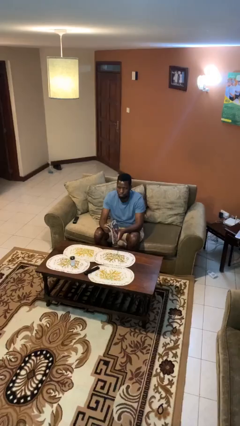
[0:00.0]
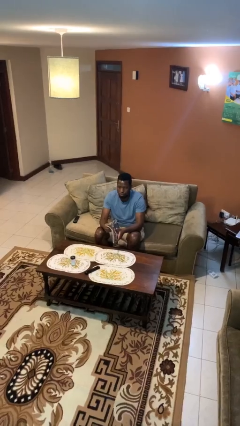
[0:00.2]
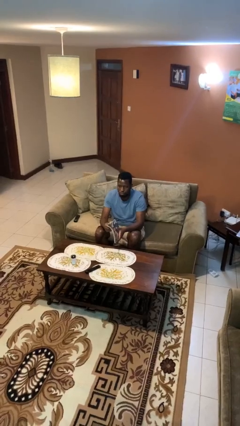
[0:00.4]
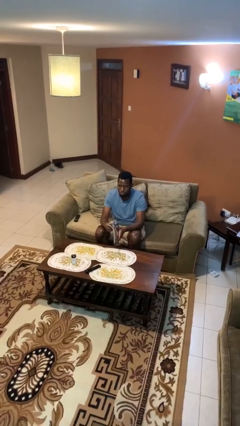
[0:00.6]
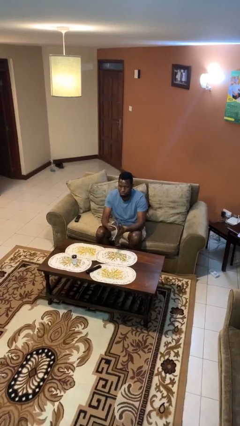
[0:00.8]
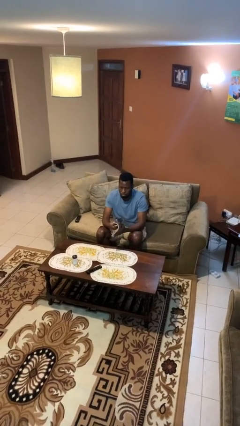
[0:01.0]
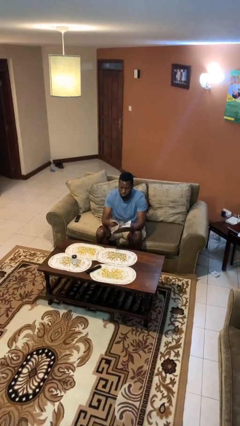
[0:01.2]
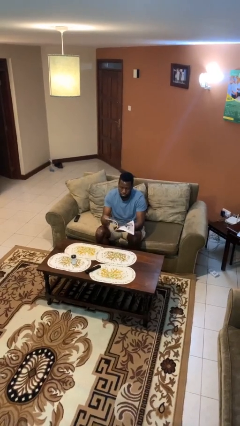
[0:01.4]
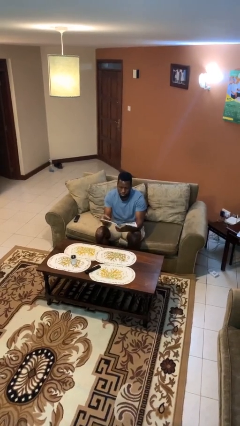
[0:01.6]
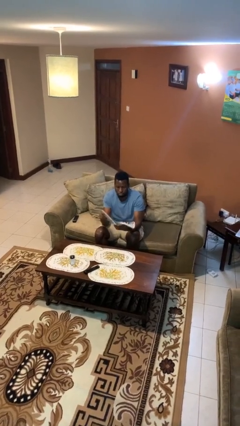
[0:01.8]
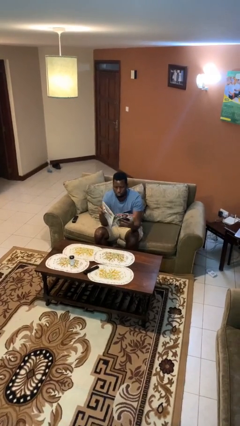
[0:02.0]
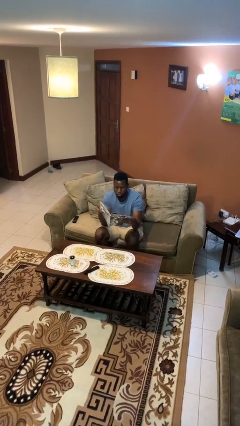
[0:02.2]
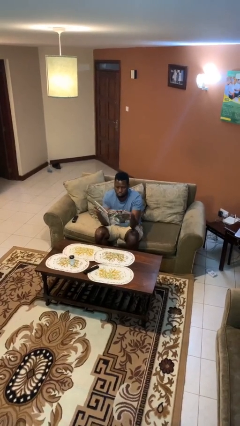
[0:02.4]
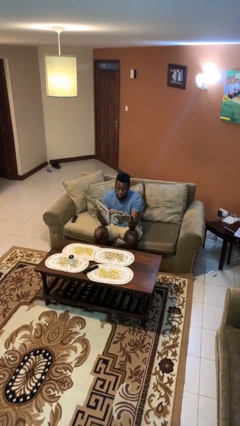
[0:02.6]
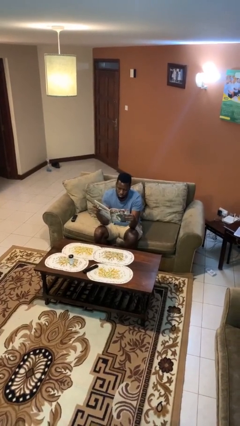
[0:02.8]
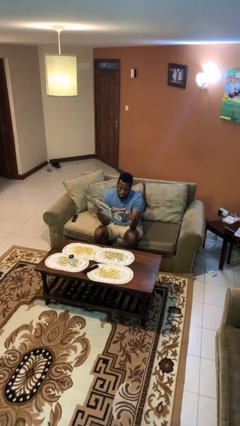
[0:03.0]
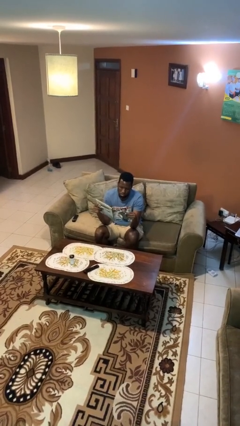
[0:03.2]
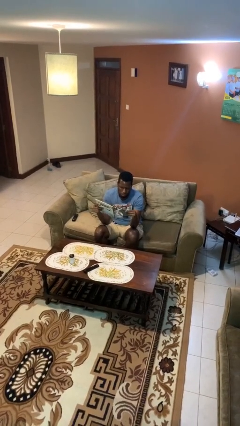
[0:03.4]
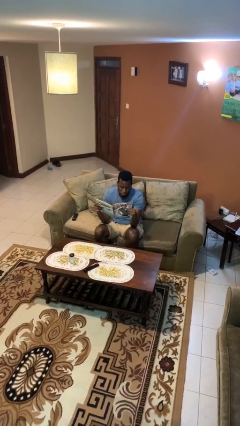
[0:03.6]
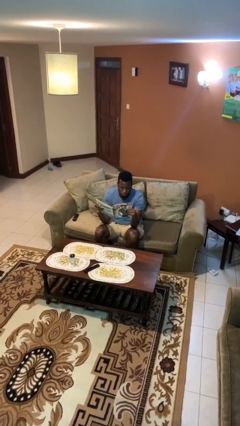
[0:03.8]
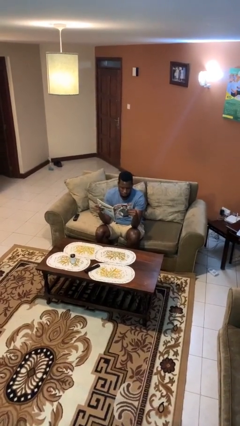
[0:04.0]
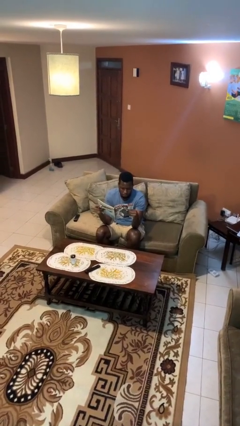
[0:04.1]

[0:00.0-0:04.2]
person reads document

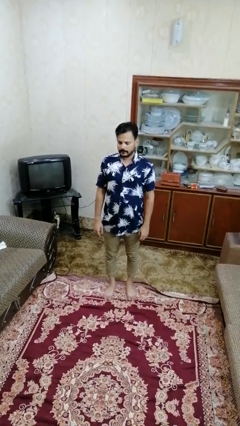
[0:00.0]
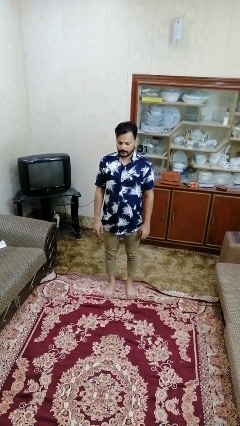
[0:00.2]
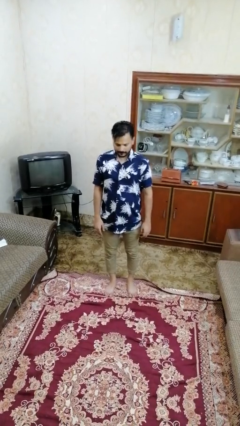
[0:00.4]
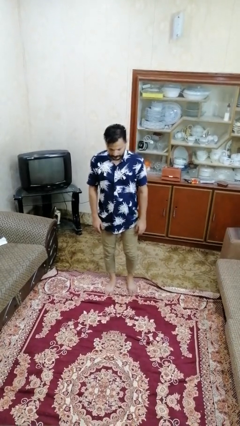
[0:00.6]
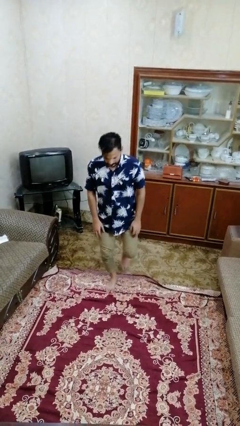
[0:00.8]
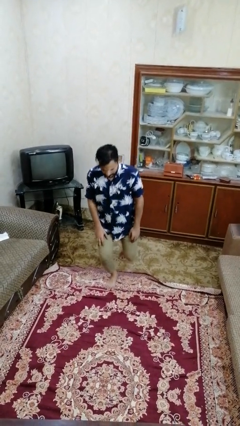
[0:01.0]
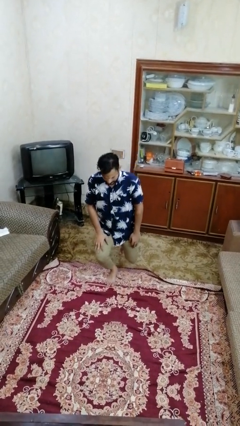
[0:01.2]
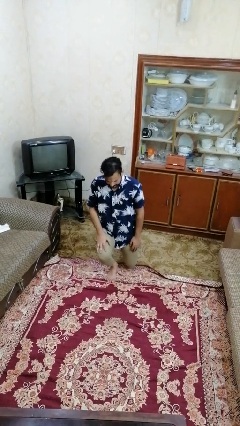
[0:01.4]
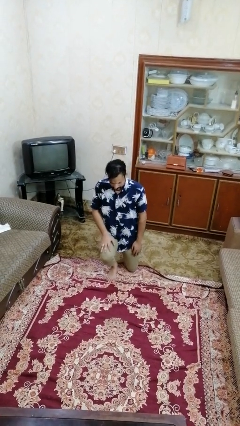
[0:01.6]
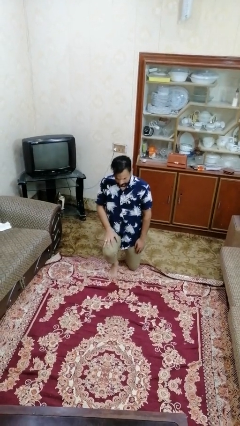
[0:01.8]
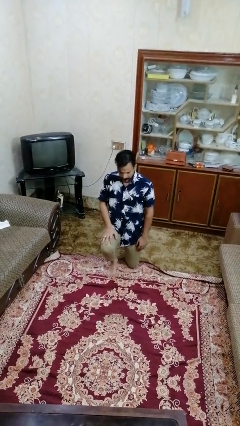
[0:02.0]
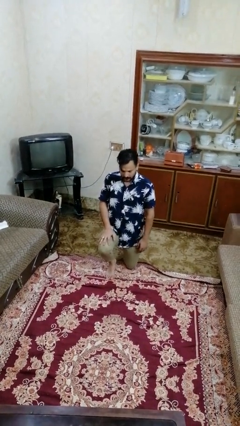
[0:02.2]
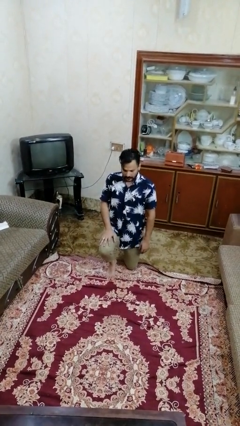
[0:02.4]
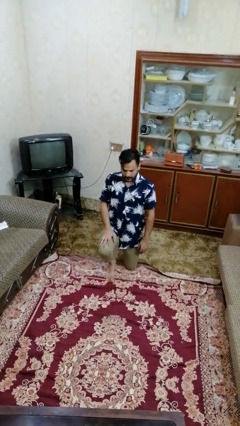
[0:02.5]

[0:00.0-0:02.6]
person kneels

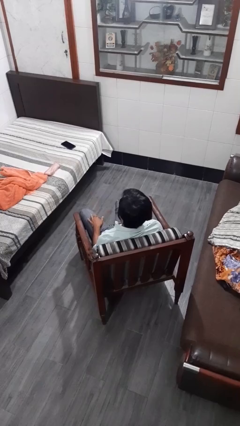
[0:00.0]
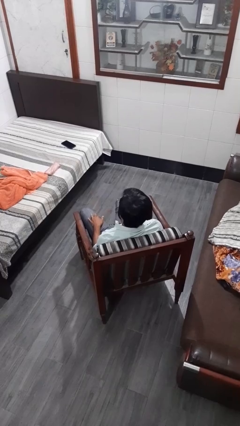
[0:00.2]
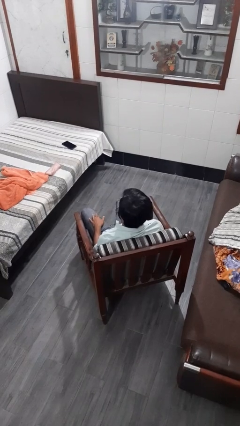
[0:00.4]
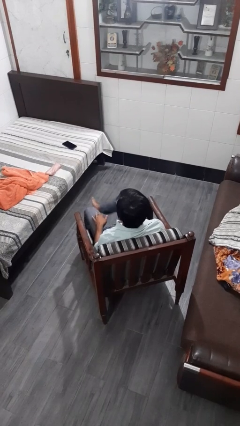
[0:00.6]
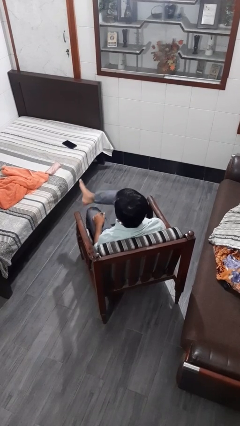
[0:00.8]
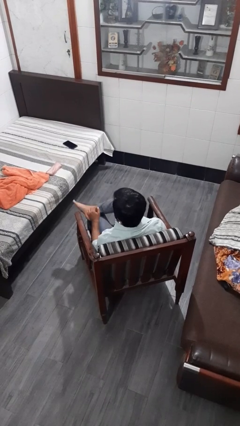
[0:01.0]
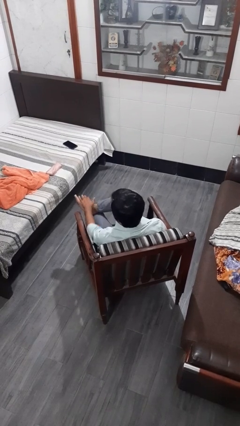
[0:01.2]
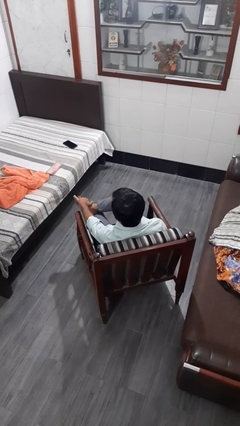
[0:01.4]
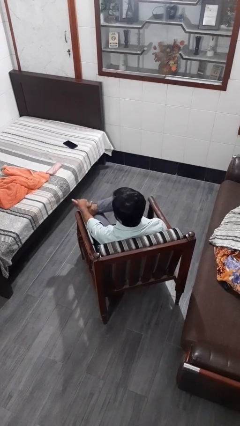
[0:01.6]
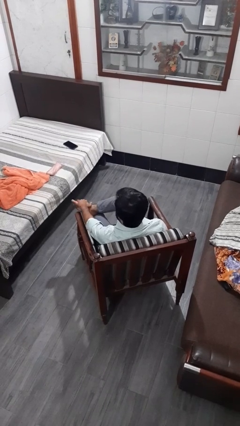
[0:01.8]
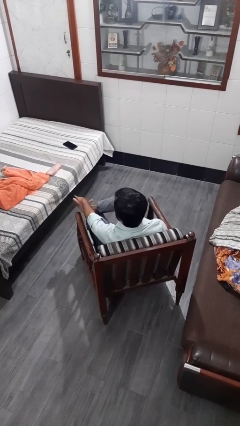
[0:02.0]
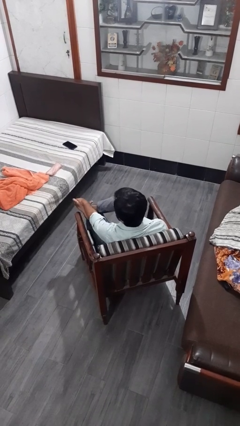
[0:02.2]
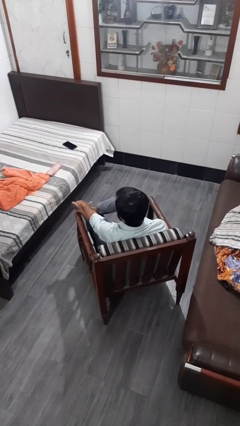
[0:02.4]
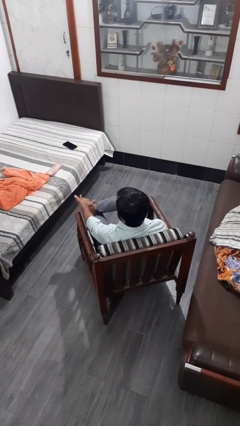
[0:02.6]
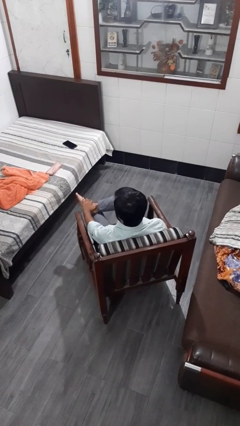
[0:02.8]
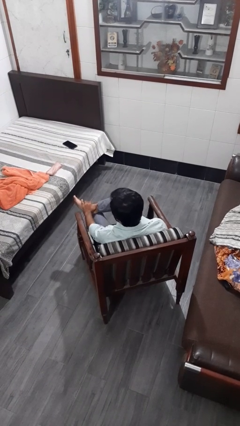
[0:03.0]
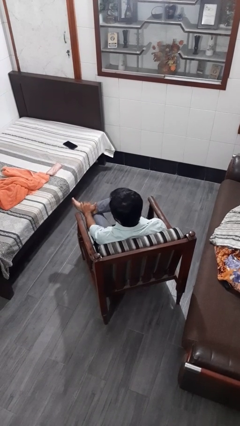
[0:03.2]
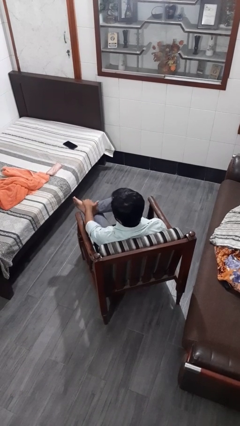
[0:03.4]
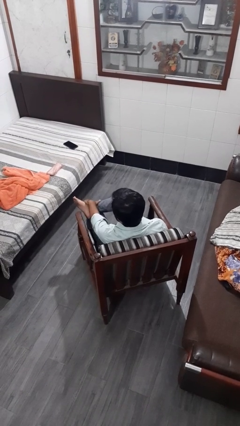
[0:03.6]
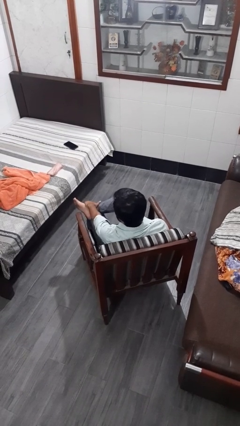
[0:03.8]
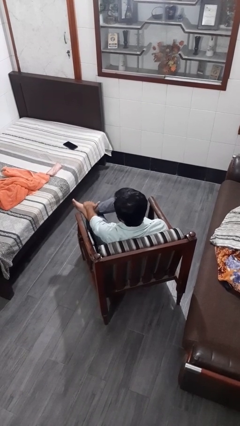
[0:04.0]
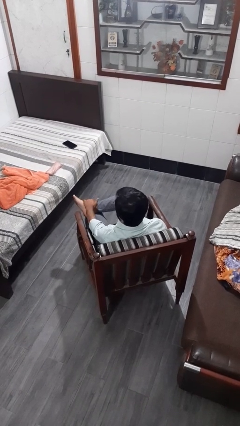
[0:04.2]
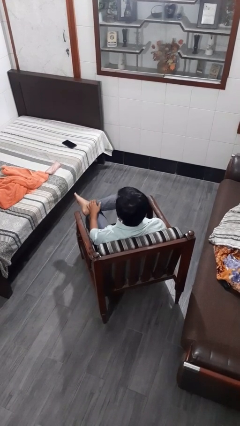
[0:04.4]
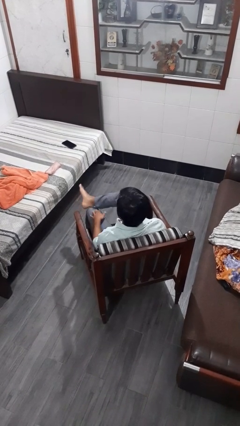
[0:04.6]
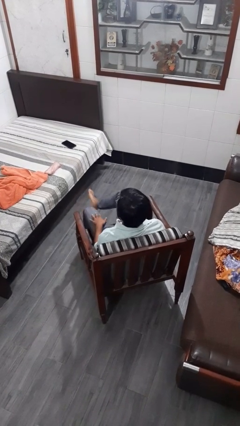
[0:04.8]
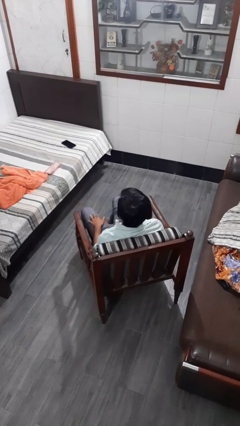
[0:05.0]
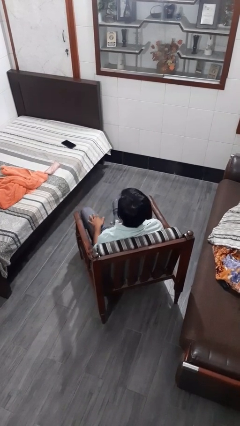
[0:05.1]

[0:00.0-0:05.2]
person rubs foot

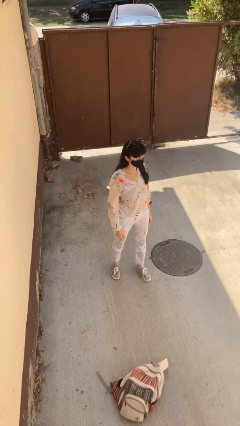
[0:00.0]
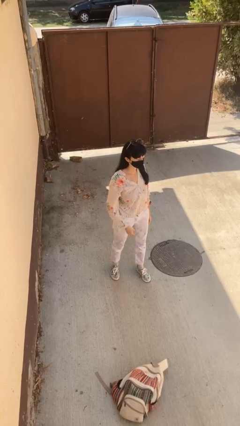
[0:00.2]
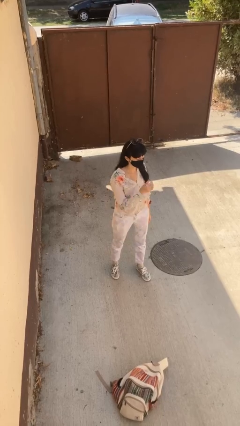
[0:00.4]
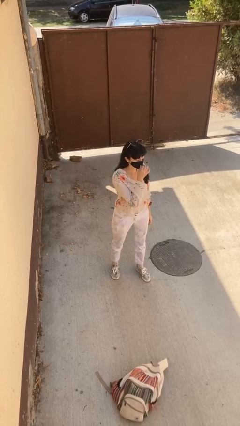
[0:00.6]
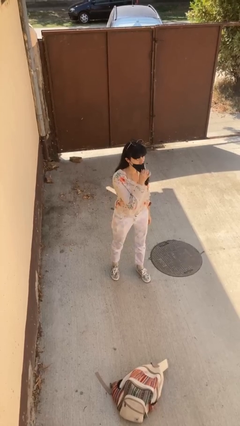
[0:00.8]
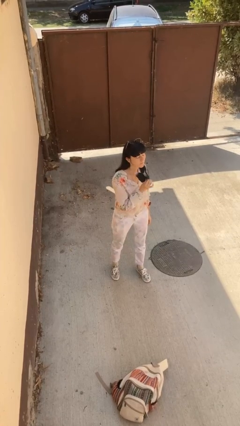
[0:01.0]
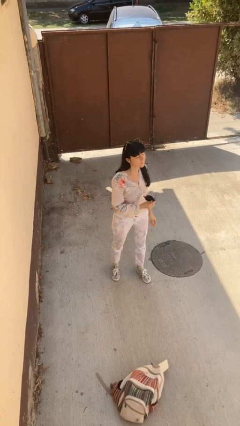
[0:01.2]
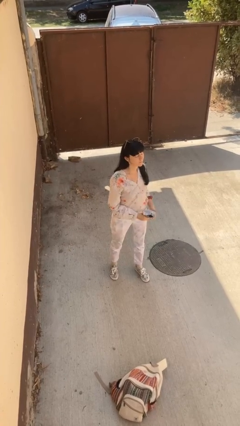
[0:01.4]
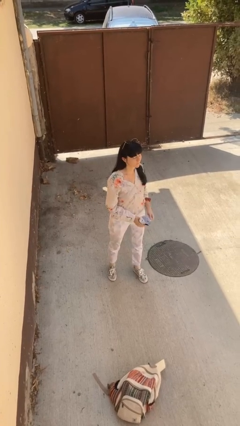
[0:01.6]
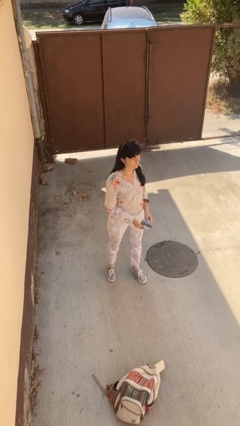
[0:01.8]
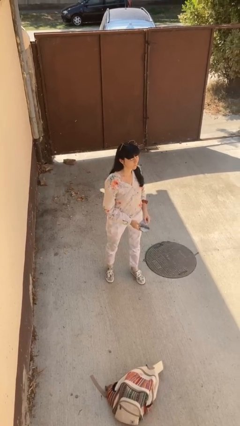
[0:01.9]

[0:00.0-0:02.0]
person takes off facemask

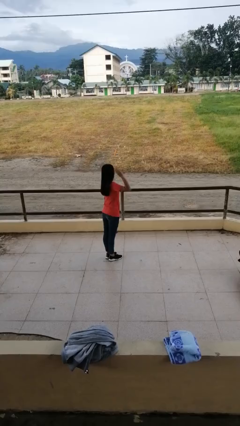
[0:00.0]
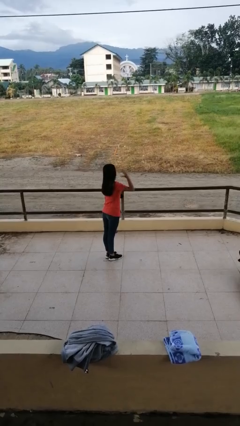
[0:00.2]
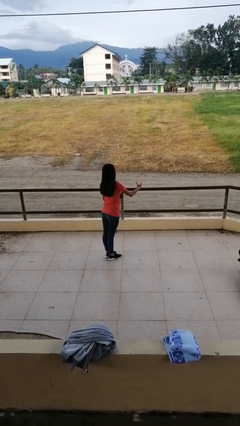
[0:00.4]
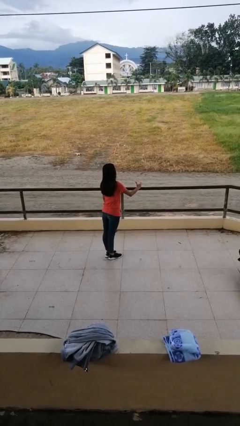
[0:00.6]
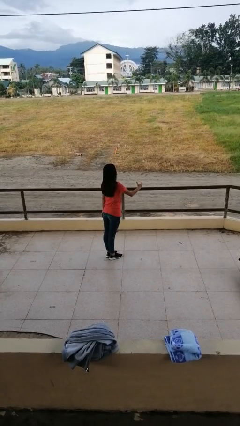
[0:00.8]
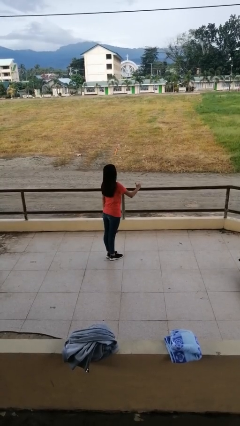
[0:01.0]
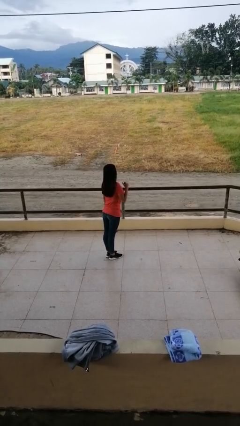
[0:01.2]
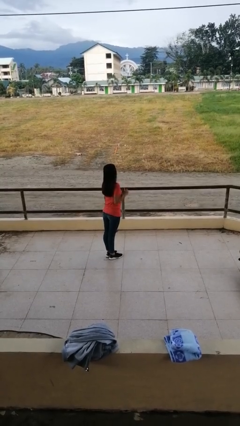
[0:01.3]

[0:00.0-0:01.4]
person karate chop

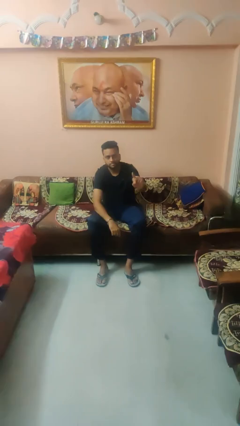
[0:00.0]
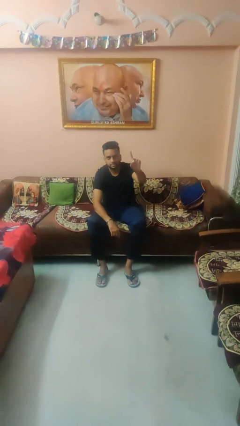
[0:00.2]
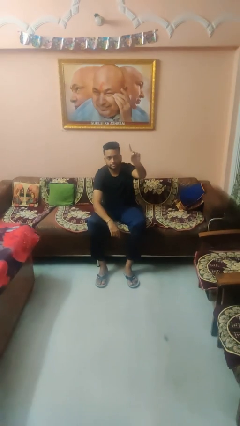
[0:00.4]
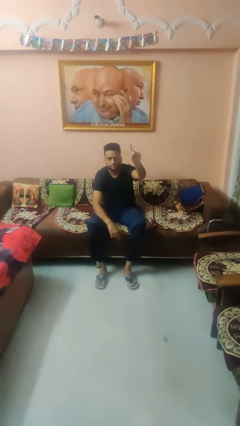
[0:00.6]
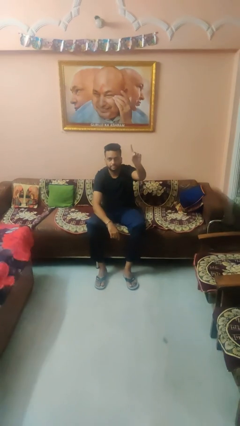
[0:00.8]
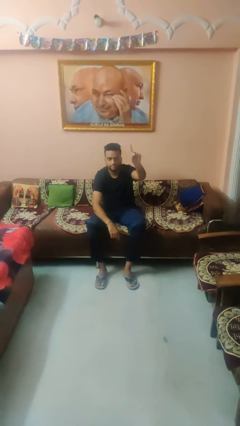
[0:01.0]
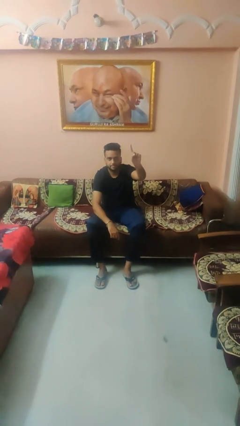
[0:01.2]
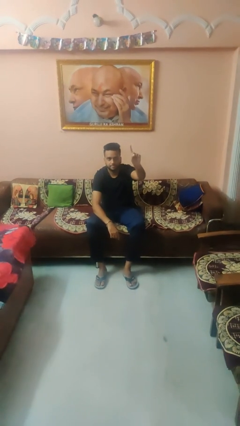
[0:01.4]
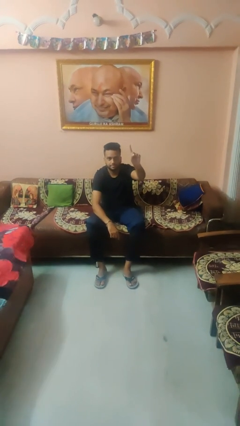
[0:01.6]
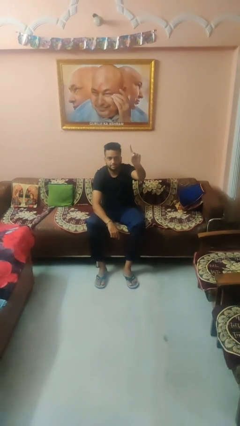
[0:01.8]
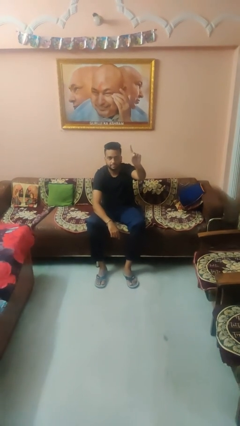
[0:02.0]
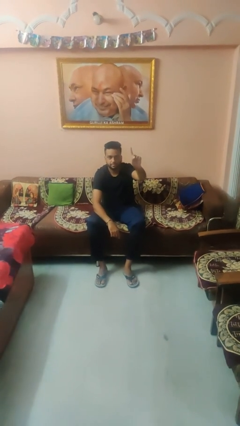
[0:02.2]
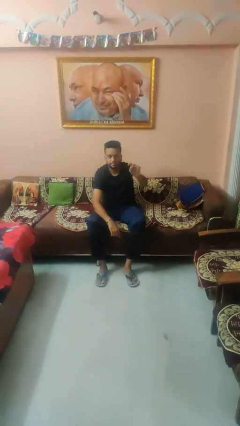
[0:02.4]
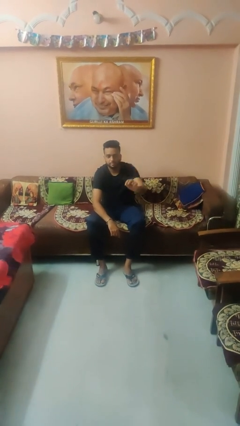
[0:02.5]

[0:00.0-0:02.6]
person gestures number one
